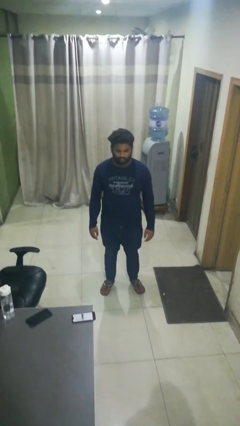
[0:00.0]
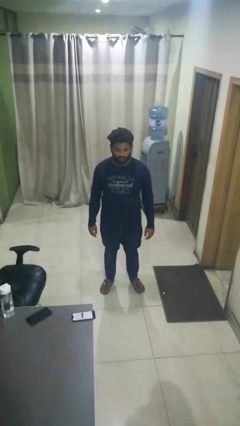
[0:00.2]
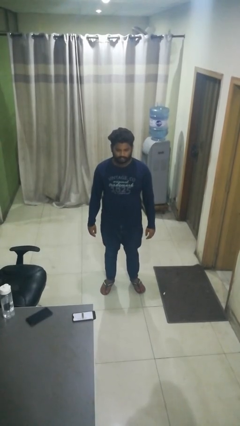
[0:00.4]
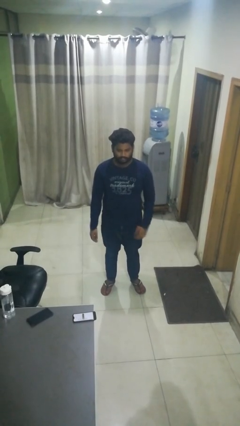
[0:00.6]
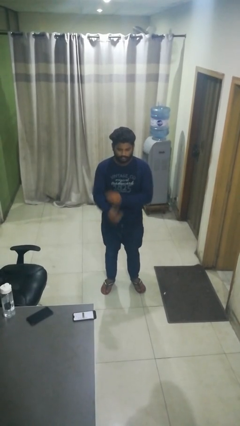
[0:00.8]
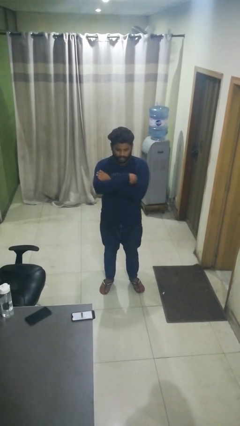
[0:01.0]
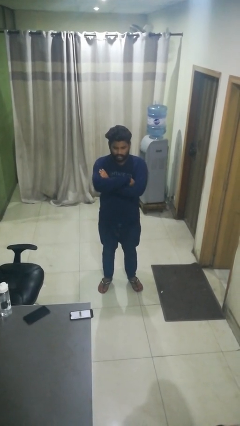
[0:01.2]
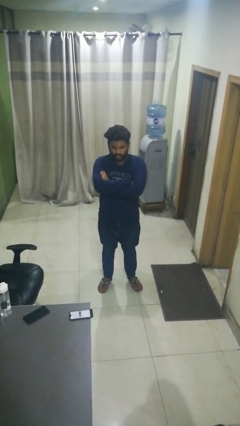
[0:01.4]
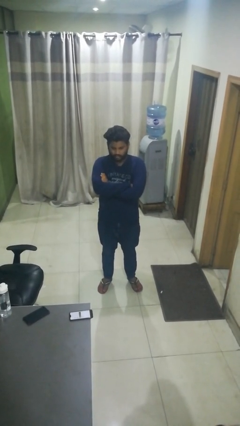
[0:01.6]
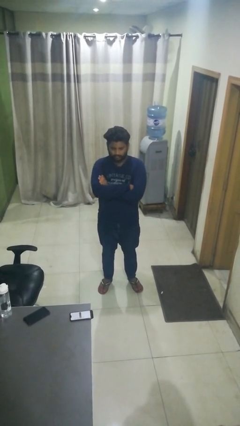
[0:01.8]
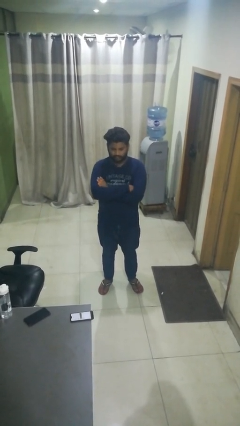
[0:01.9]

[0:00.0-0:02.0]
person crosses arms

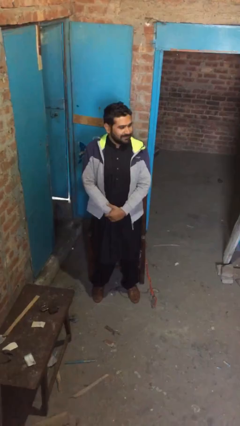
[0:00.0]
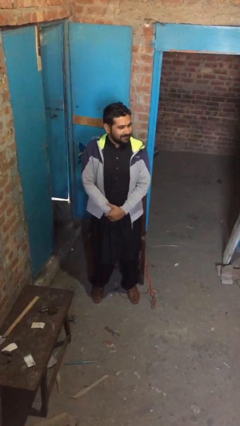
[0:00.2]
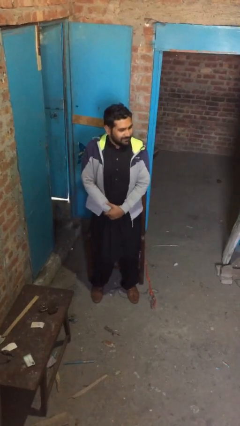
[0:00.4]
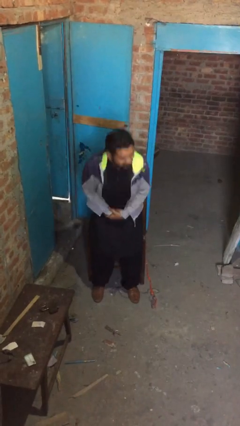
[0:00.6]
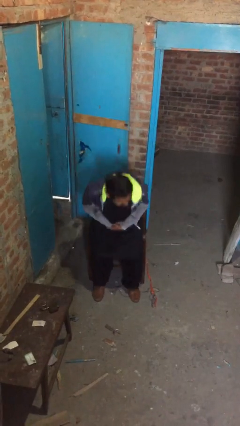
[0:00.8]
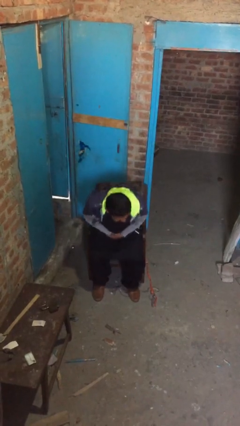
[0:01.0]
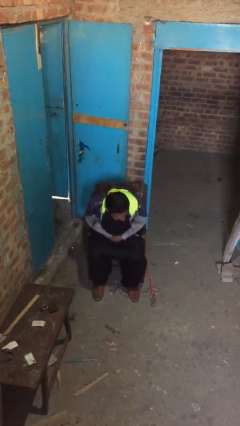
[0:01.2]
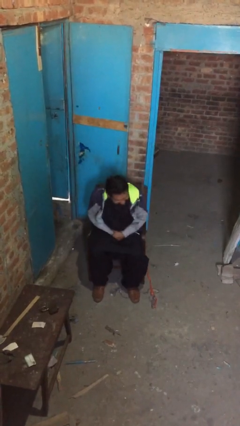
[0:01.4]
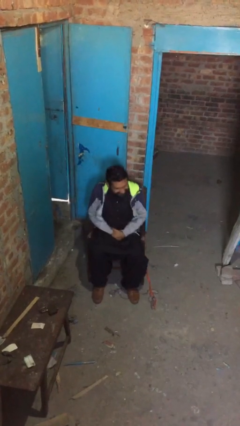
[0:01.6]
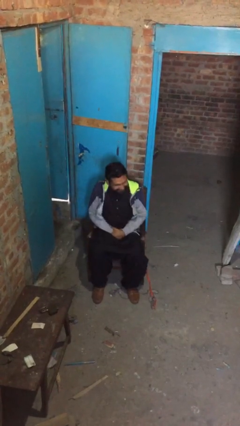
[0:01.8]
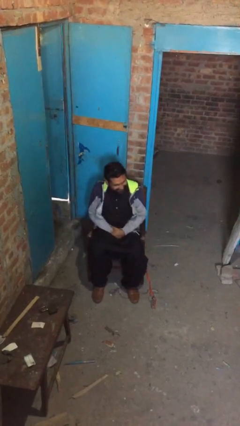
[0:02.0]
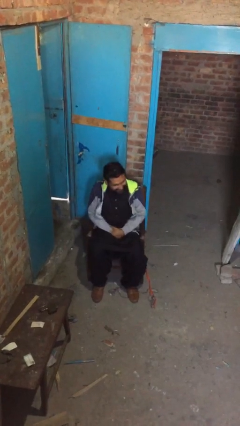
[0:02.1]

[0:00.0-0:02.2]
person sits down

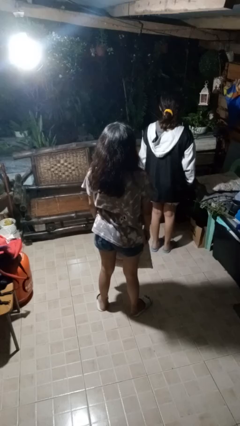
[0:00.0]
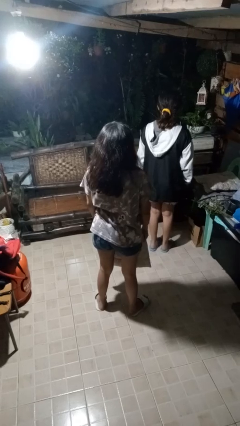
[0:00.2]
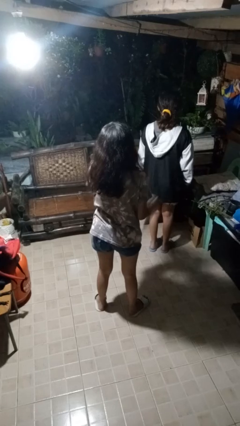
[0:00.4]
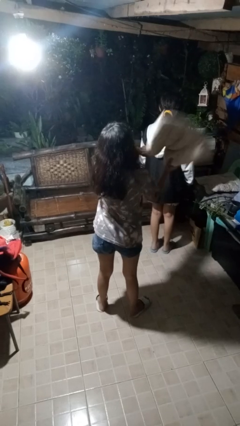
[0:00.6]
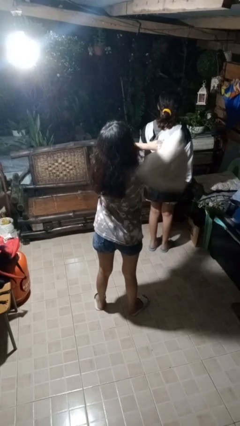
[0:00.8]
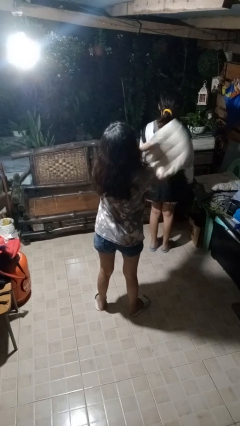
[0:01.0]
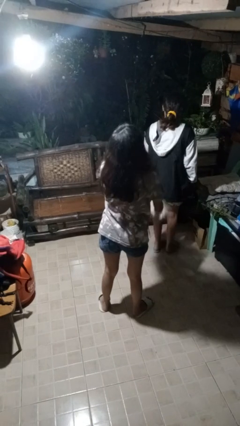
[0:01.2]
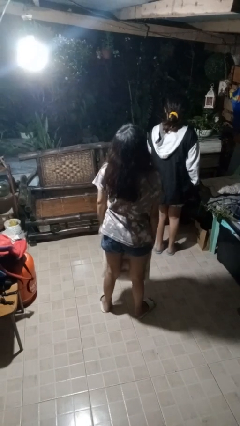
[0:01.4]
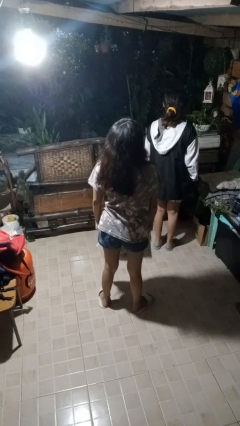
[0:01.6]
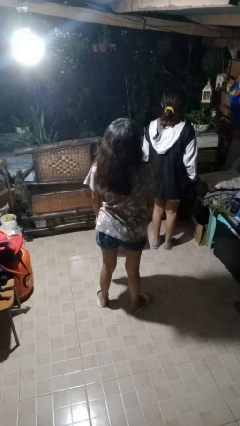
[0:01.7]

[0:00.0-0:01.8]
person hits person with pillow

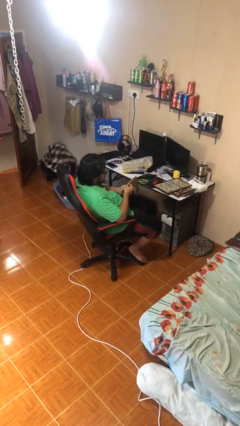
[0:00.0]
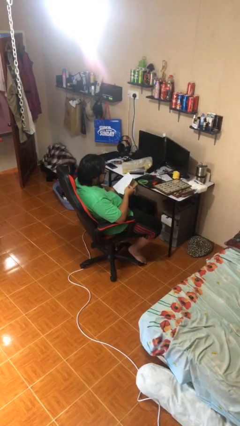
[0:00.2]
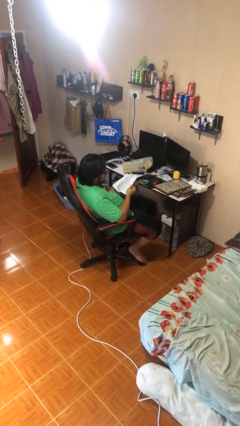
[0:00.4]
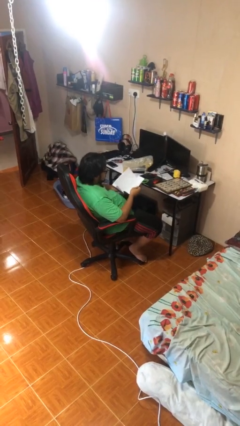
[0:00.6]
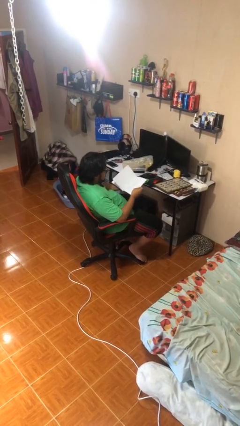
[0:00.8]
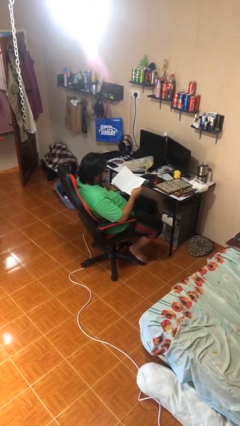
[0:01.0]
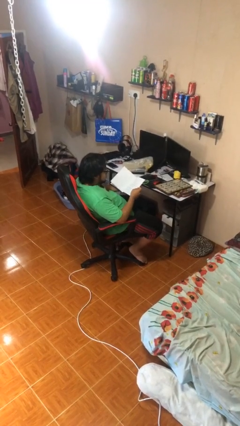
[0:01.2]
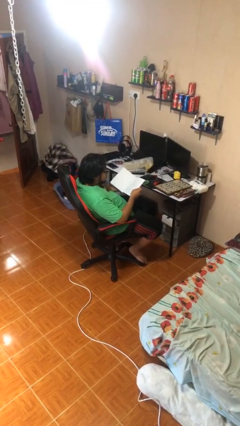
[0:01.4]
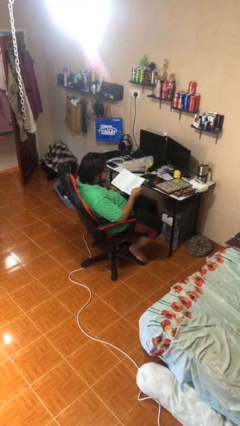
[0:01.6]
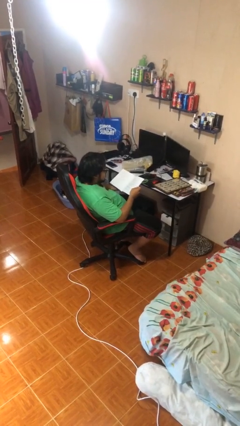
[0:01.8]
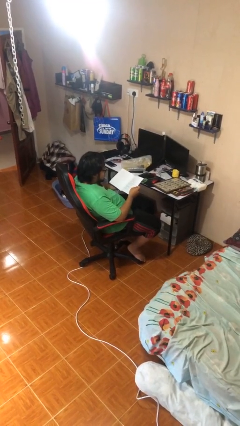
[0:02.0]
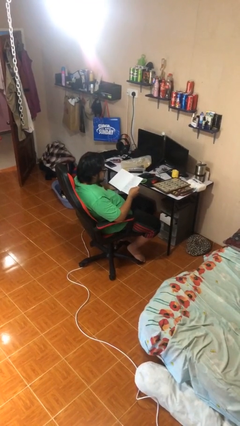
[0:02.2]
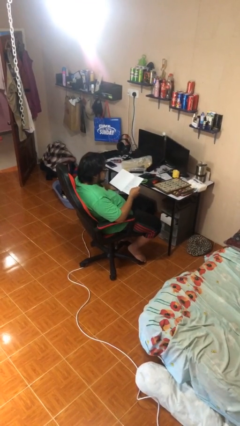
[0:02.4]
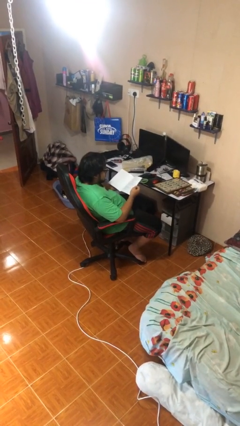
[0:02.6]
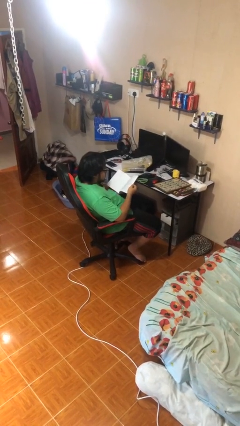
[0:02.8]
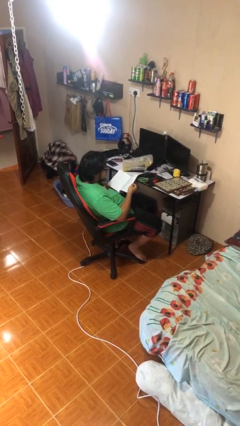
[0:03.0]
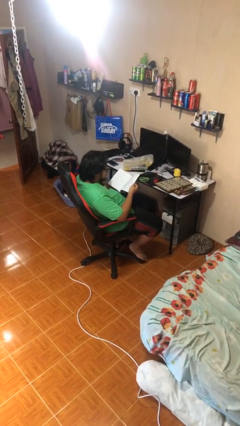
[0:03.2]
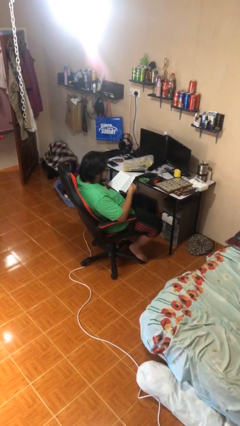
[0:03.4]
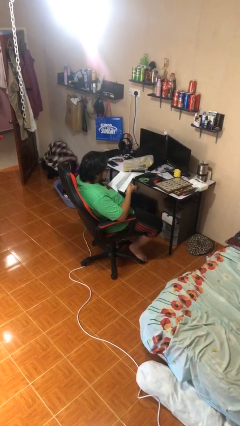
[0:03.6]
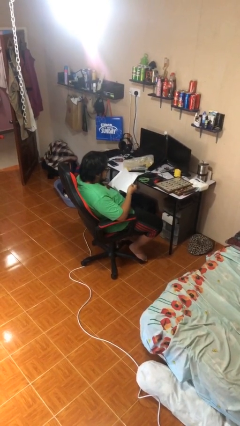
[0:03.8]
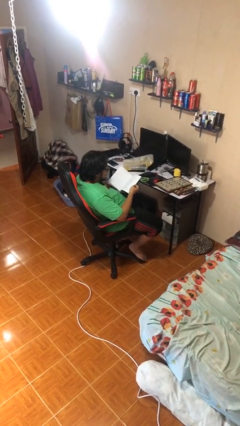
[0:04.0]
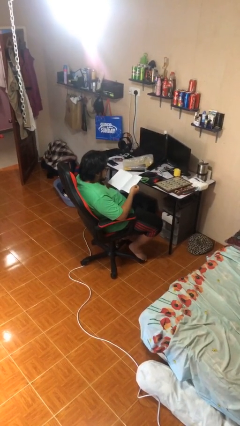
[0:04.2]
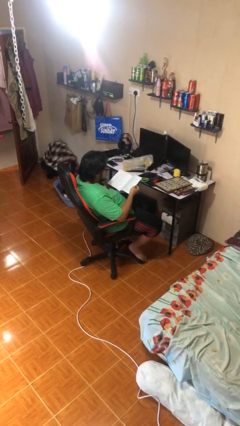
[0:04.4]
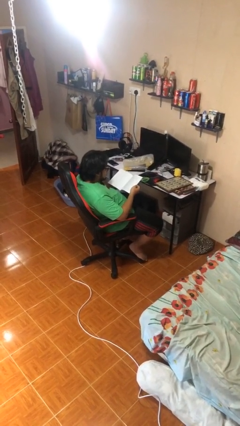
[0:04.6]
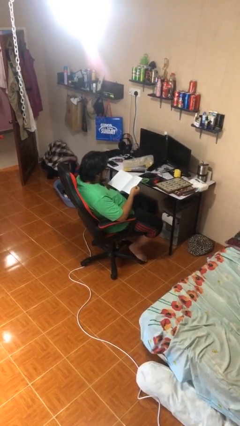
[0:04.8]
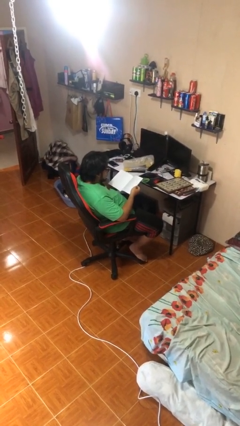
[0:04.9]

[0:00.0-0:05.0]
person reads document

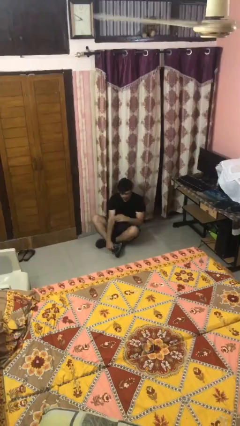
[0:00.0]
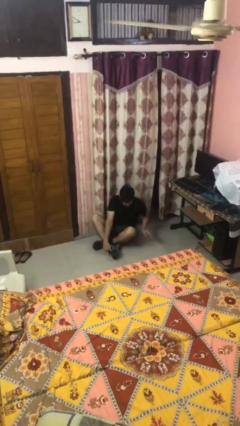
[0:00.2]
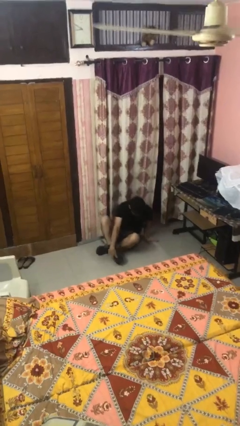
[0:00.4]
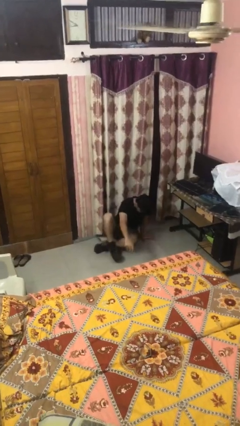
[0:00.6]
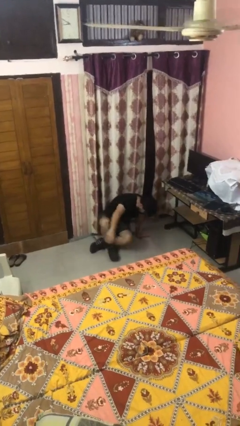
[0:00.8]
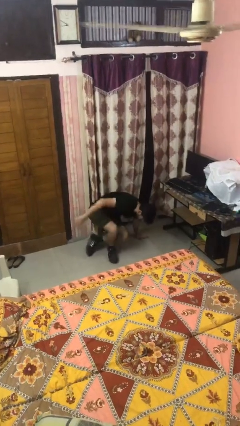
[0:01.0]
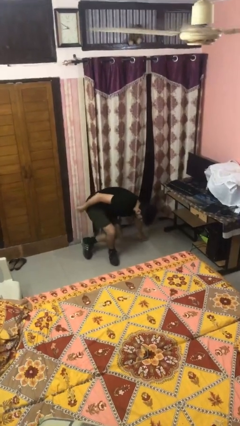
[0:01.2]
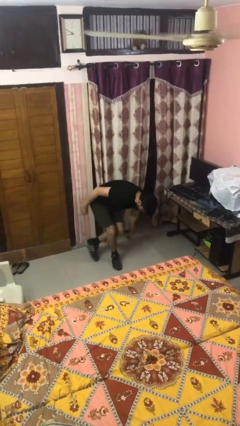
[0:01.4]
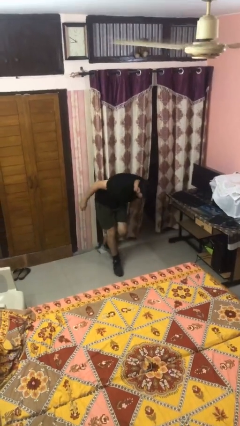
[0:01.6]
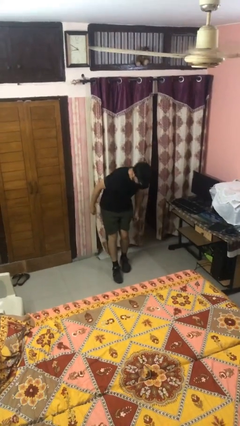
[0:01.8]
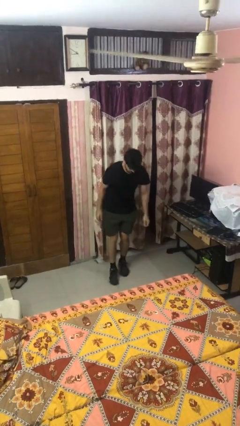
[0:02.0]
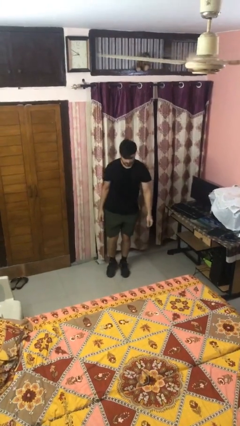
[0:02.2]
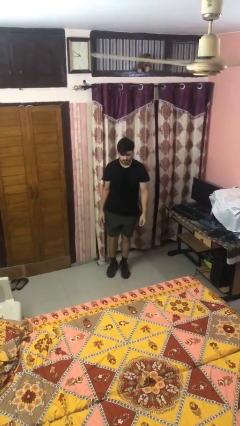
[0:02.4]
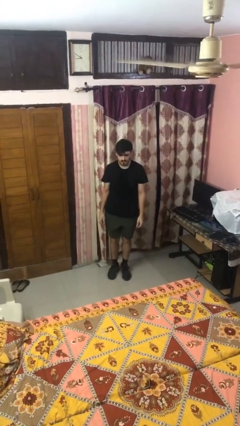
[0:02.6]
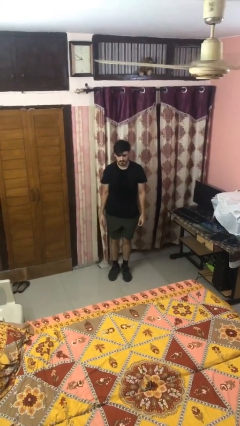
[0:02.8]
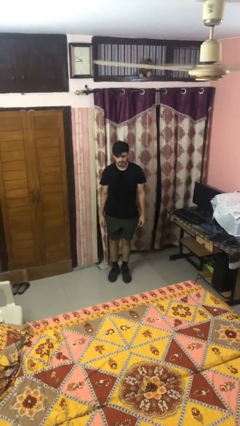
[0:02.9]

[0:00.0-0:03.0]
person stands up from floor

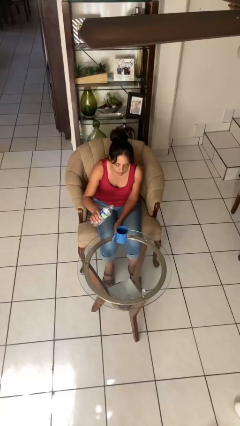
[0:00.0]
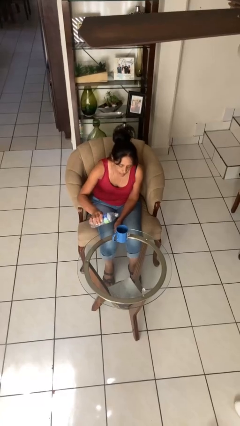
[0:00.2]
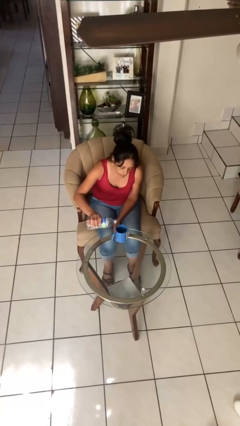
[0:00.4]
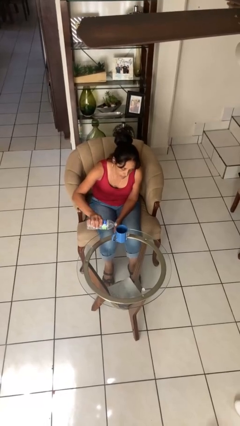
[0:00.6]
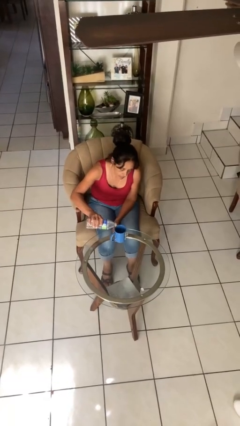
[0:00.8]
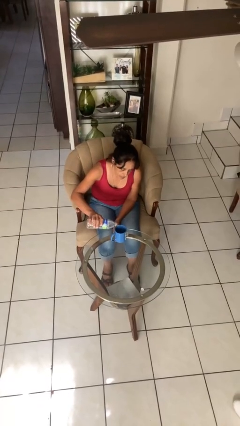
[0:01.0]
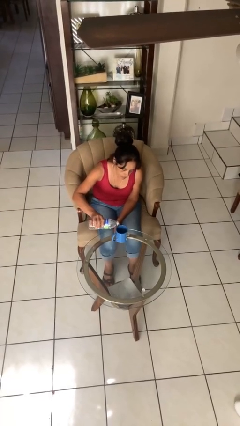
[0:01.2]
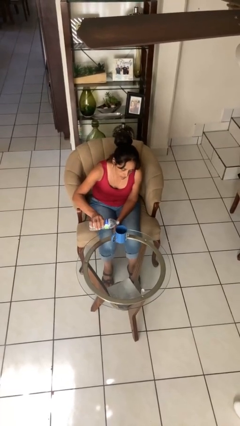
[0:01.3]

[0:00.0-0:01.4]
person pours liquid into cup

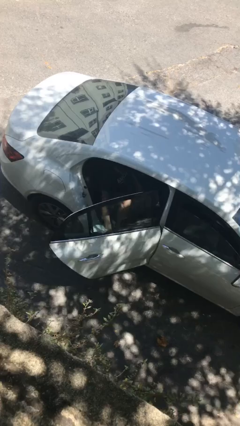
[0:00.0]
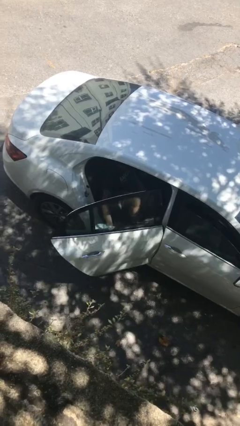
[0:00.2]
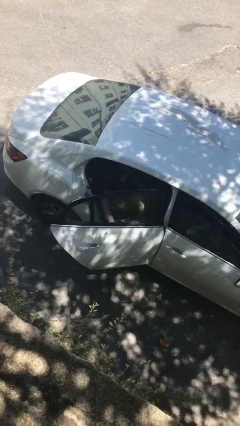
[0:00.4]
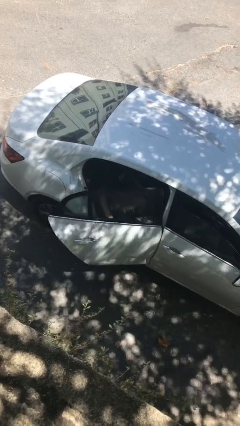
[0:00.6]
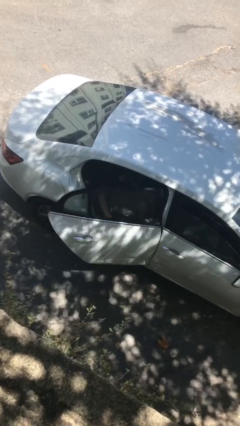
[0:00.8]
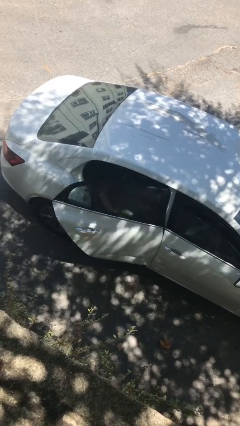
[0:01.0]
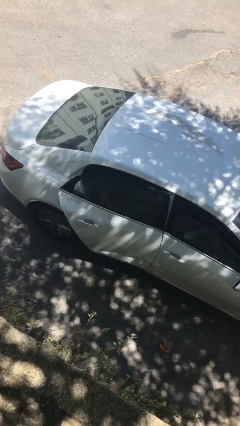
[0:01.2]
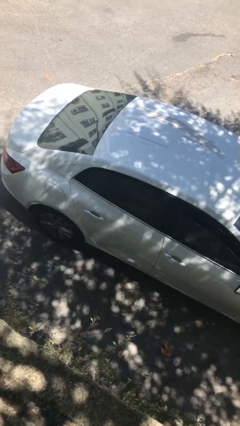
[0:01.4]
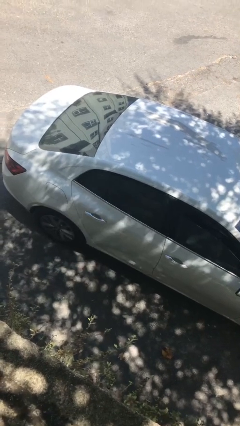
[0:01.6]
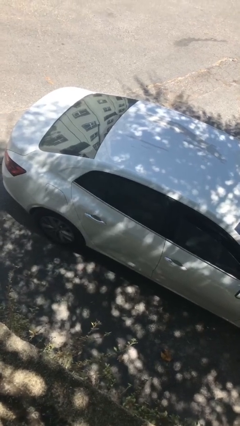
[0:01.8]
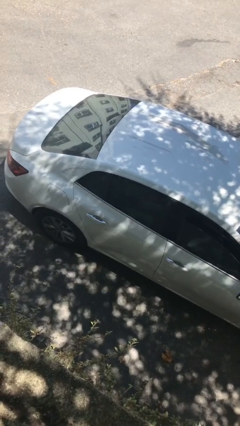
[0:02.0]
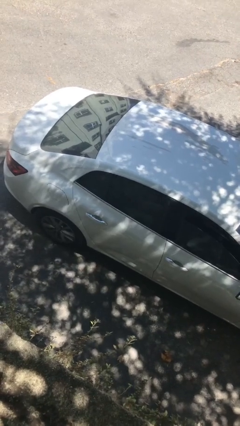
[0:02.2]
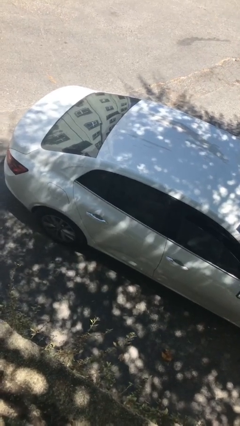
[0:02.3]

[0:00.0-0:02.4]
person closes car door
